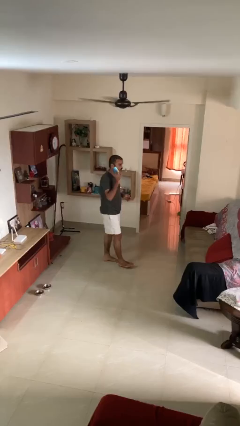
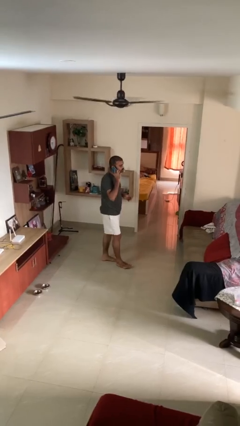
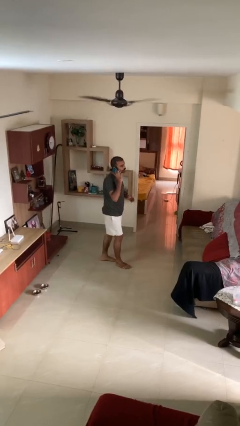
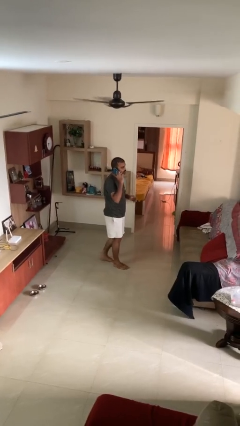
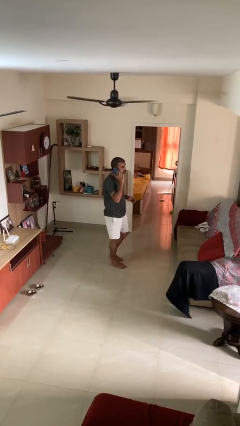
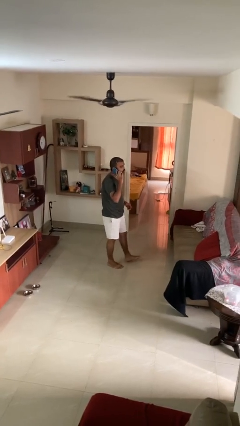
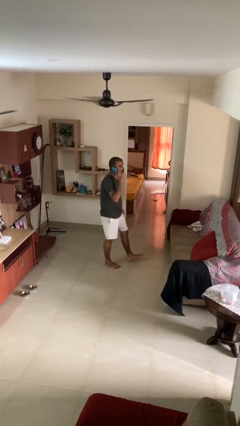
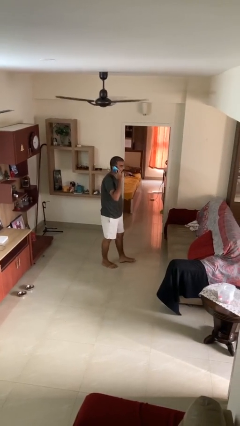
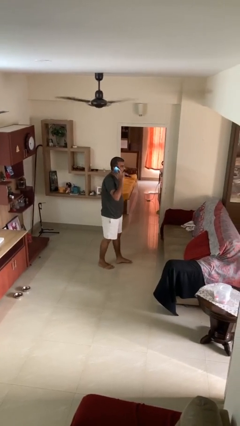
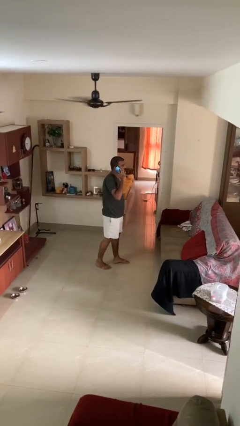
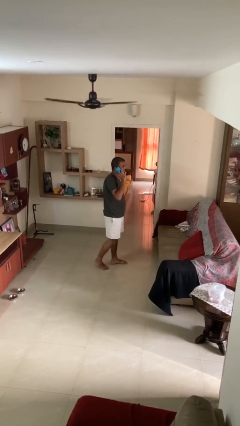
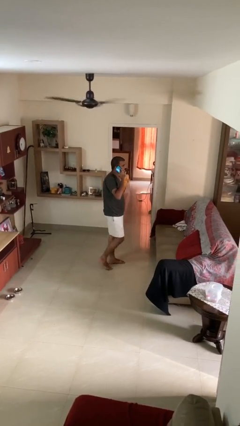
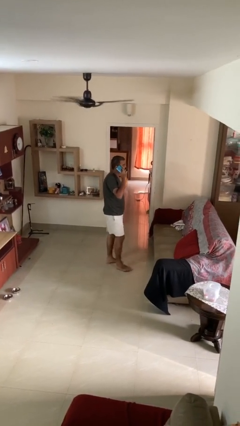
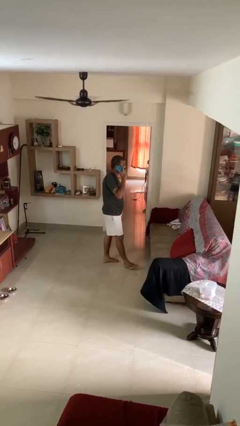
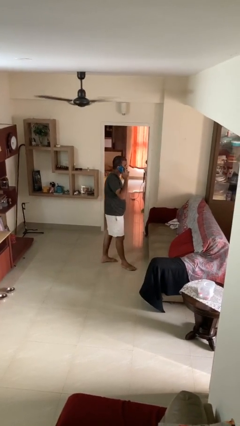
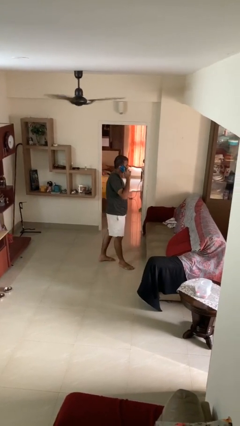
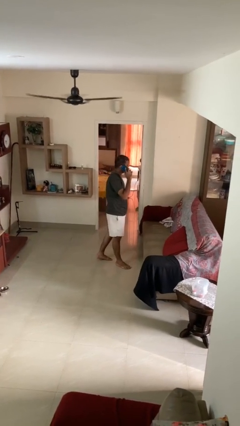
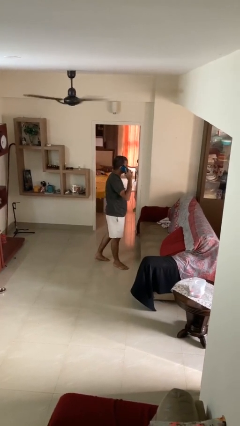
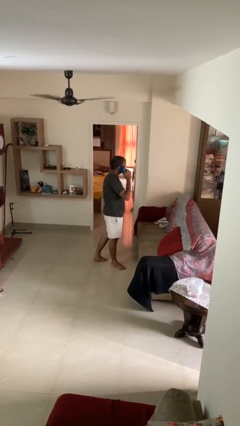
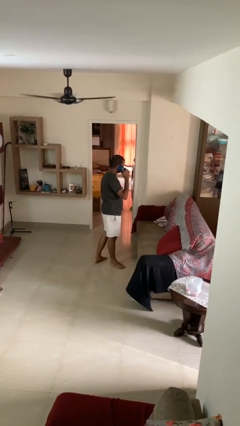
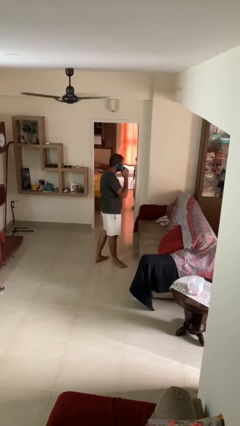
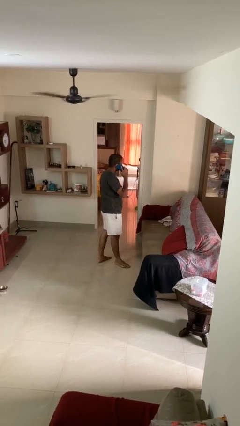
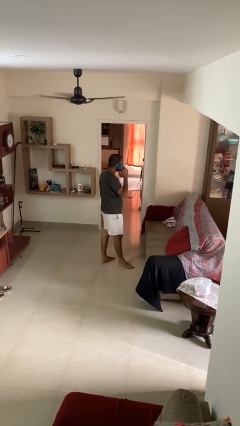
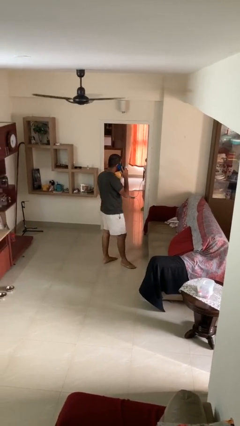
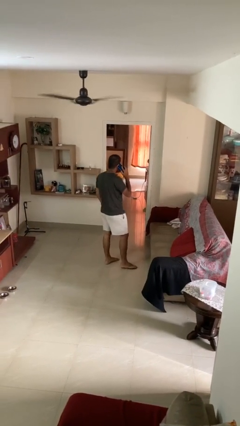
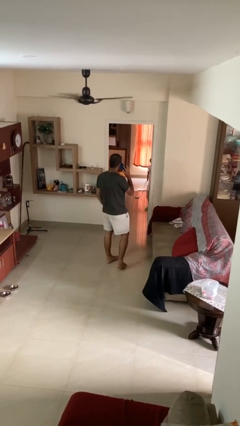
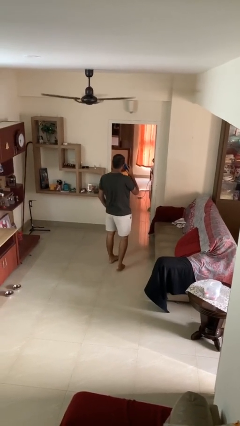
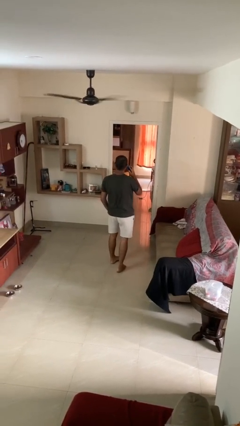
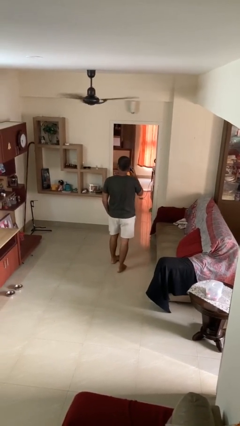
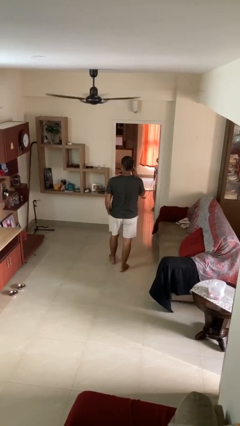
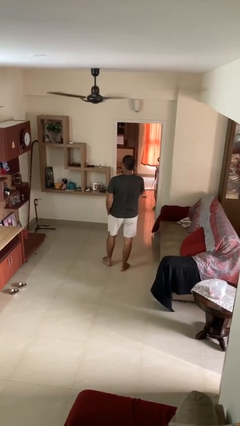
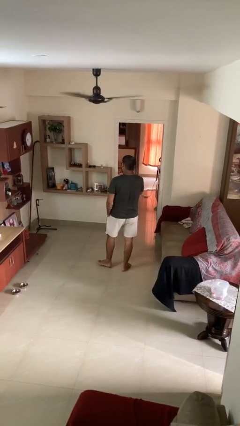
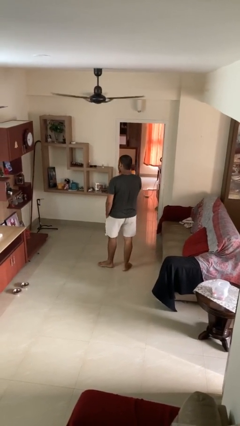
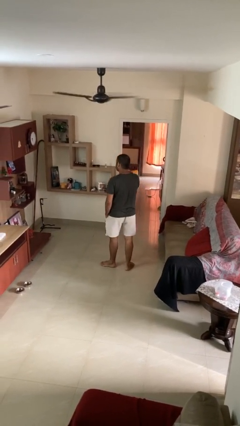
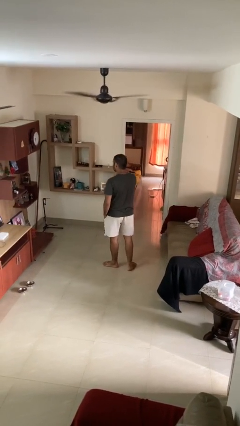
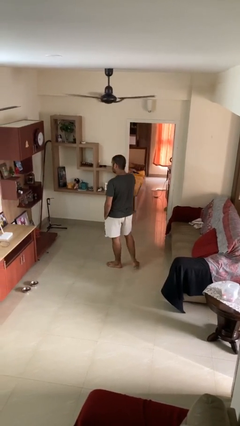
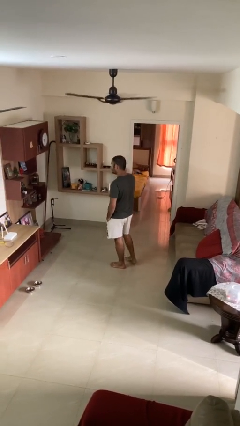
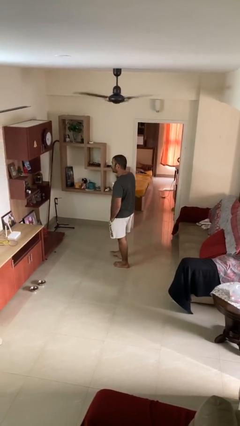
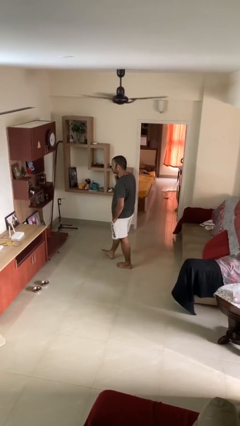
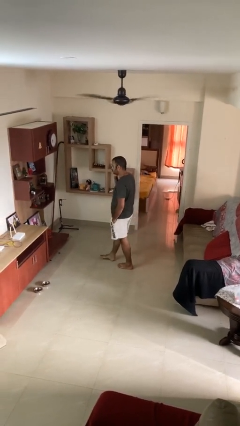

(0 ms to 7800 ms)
person talks on phone

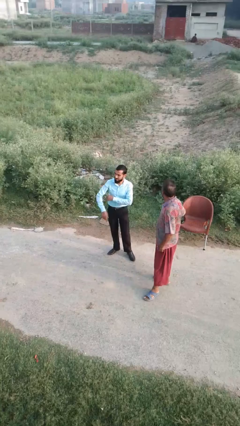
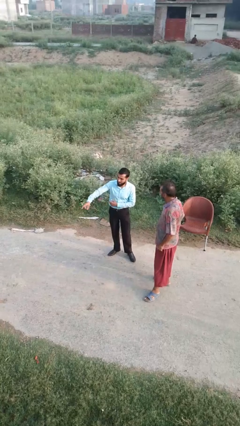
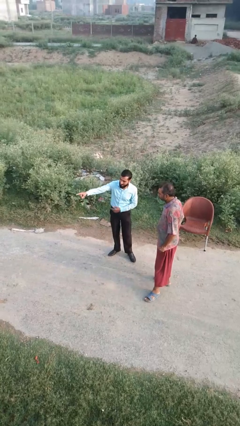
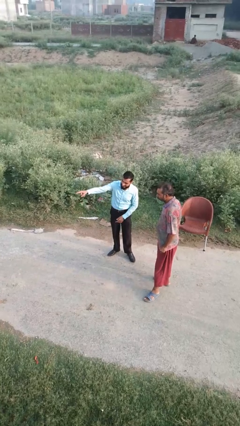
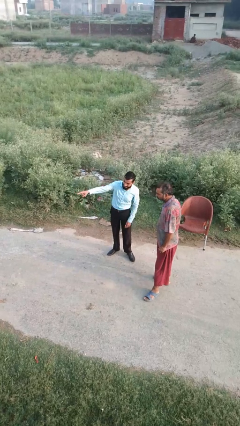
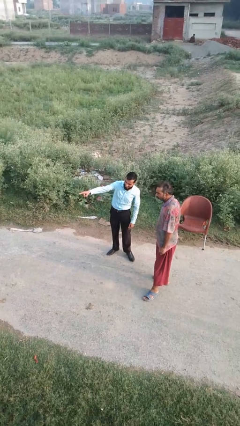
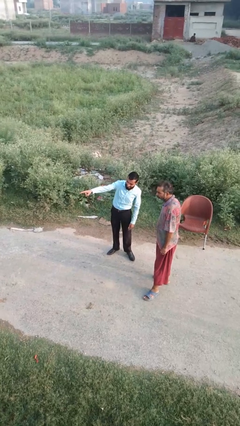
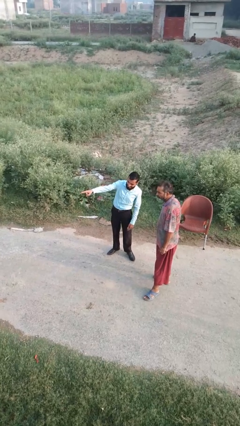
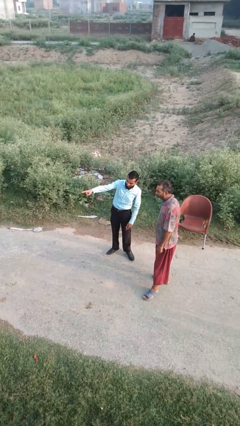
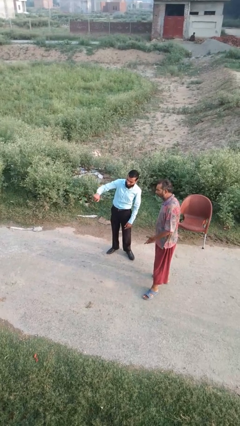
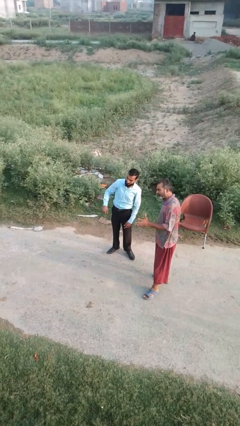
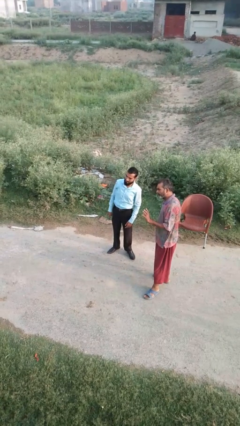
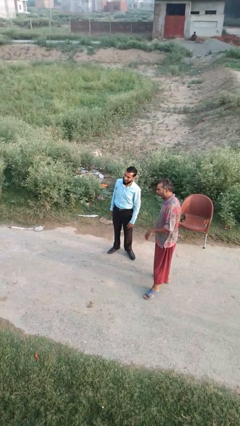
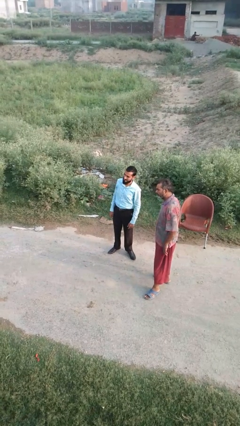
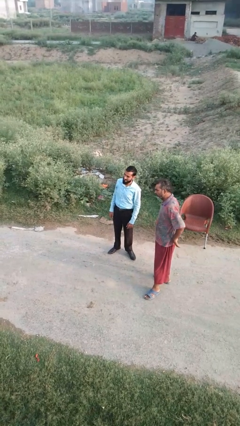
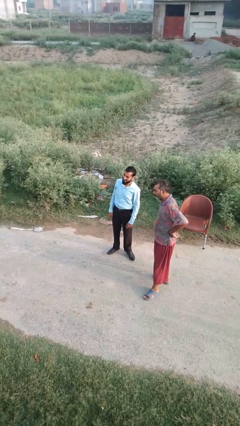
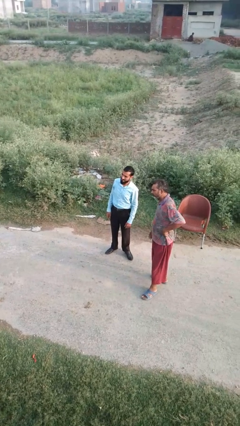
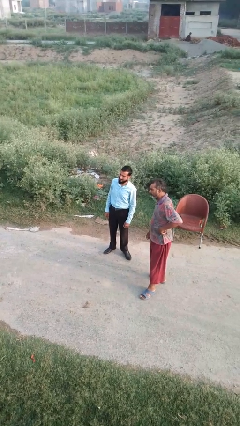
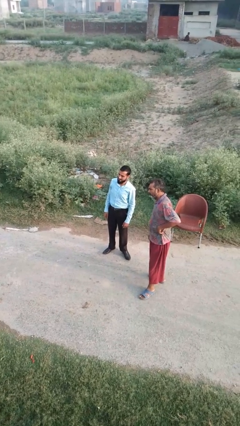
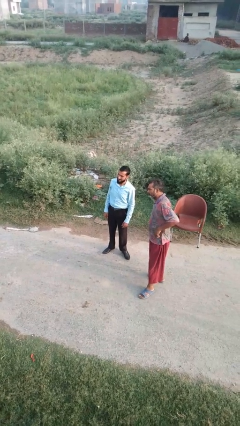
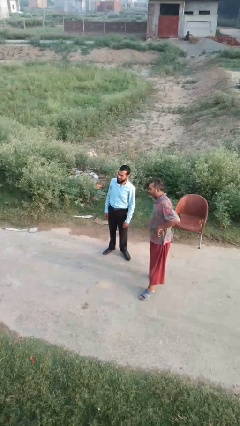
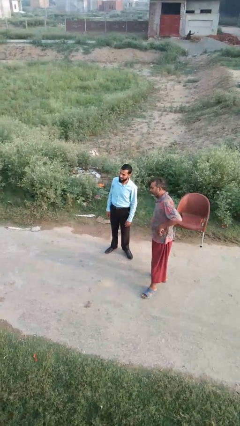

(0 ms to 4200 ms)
person points at person

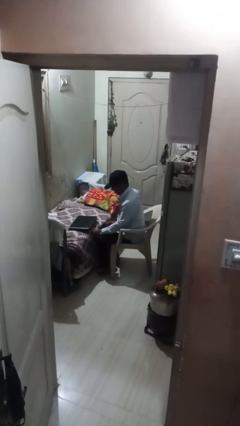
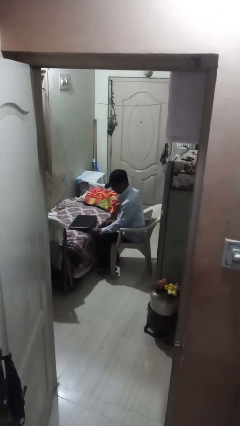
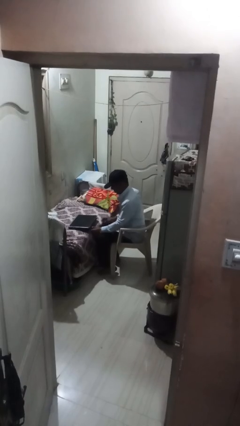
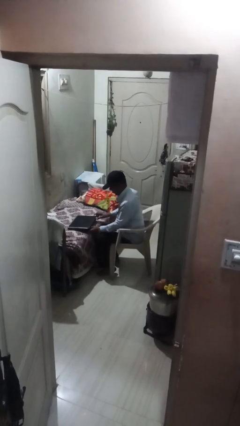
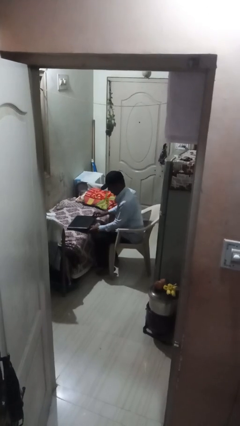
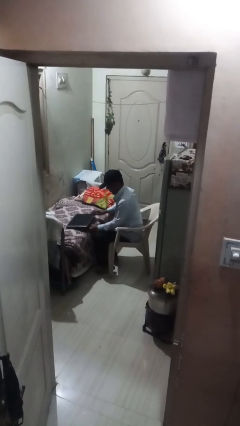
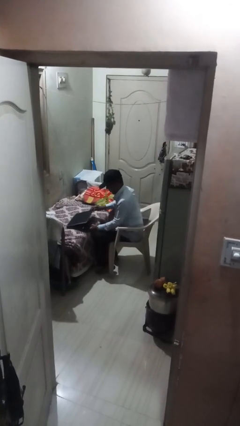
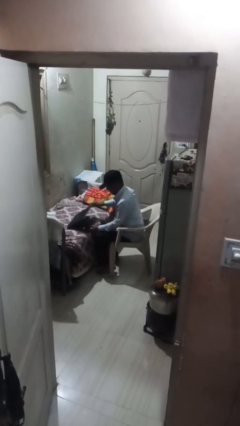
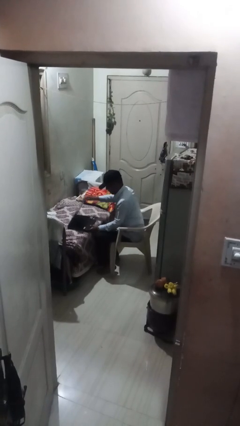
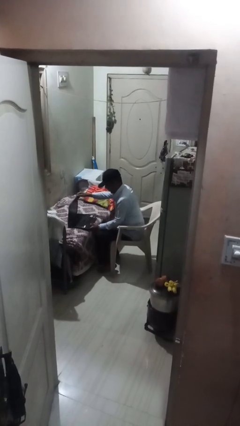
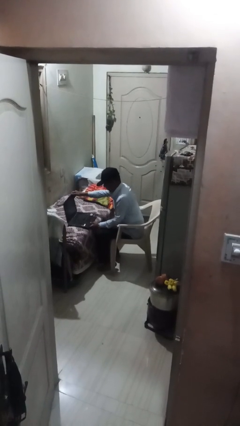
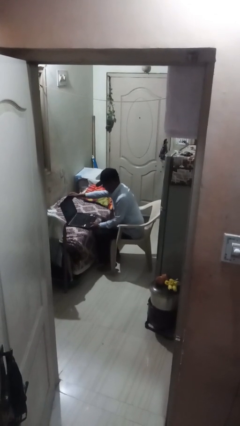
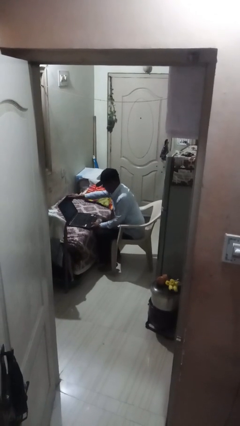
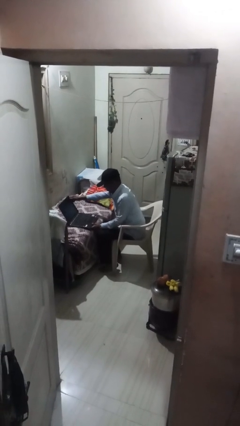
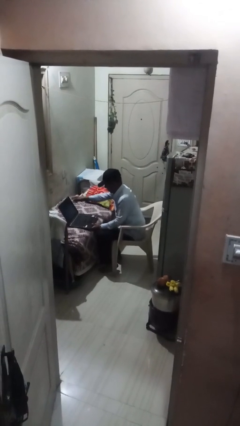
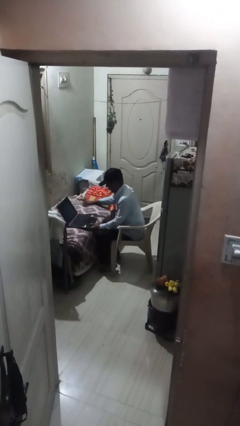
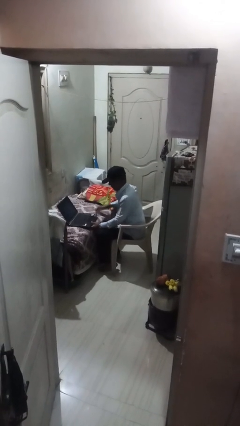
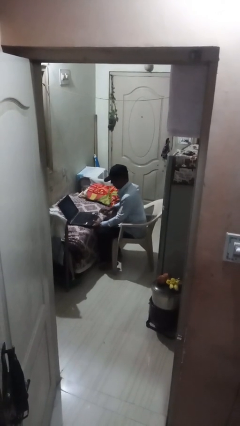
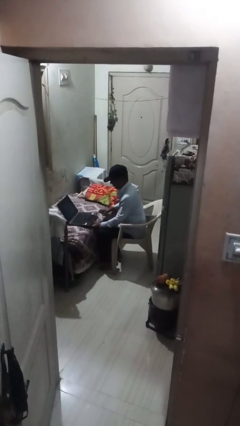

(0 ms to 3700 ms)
person opens laptop

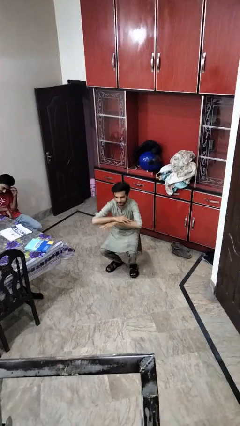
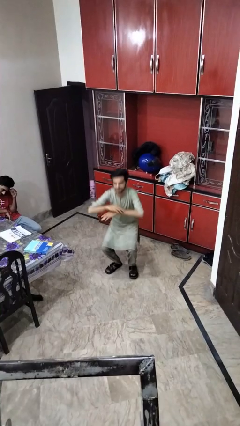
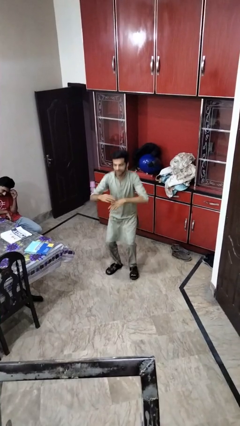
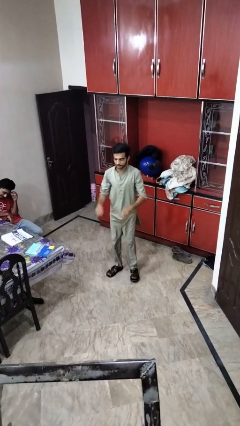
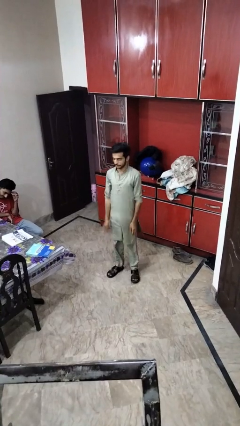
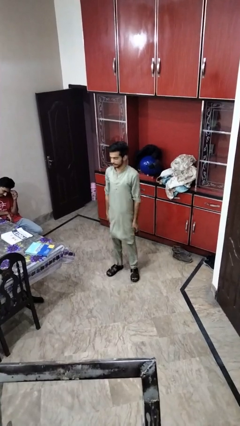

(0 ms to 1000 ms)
person stands up

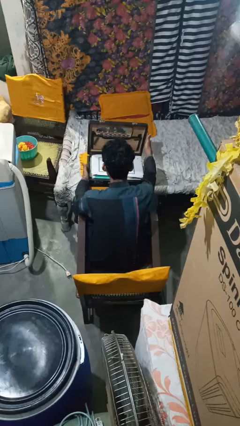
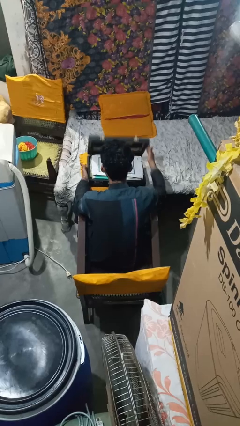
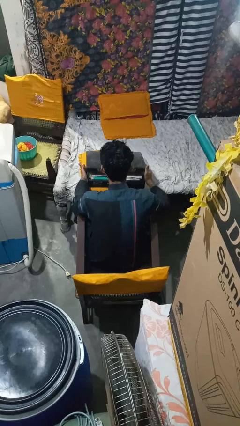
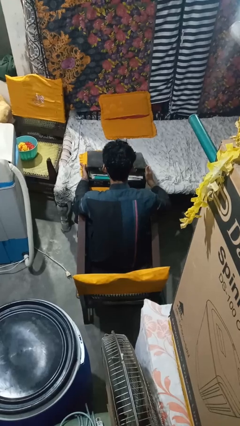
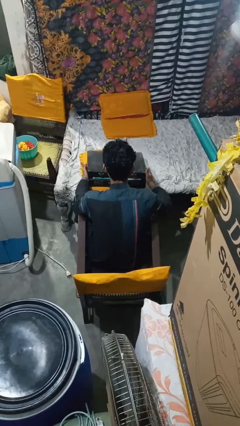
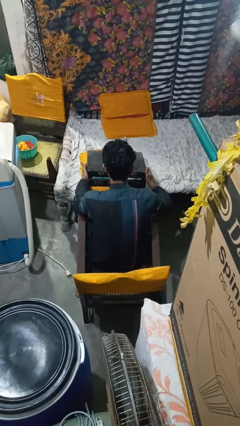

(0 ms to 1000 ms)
person closes suitcase
